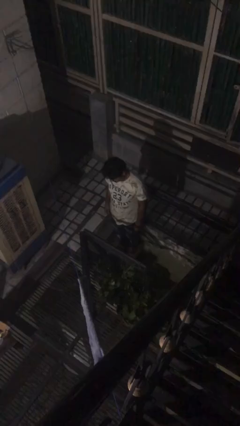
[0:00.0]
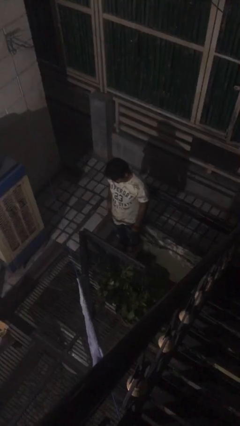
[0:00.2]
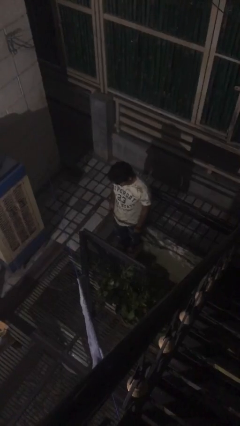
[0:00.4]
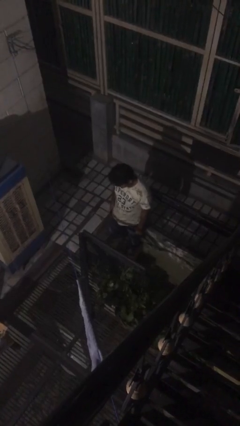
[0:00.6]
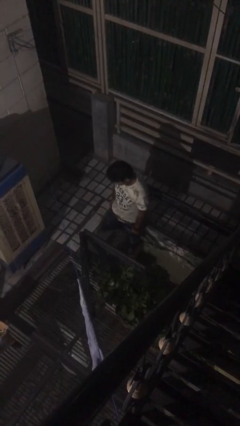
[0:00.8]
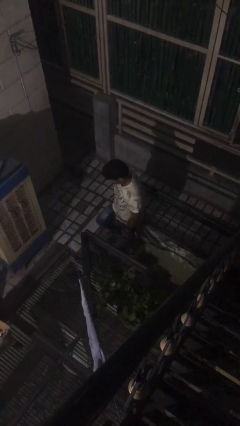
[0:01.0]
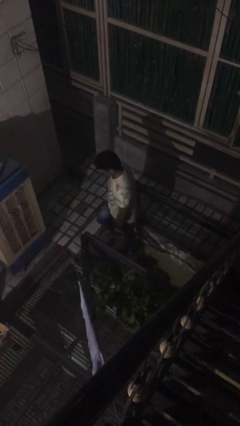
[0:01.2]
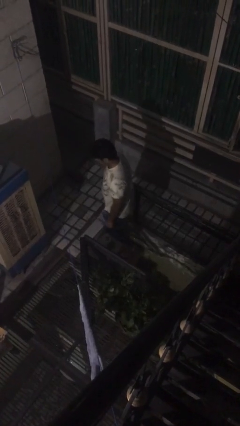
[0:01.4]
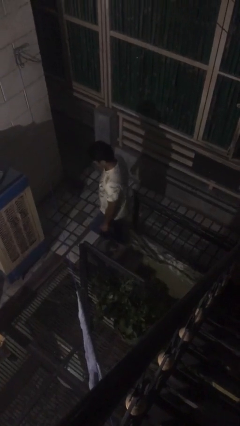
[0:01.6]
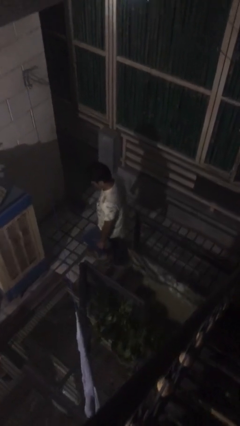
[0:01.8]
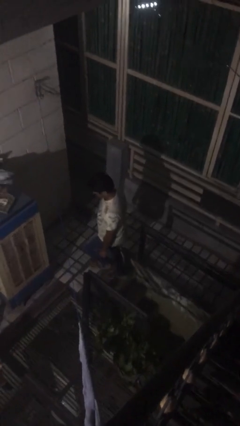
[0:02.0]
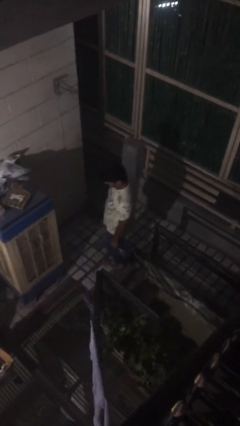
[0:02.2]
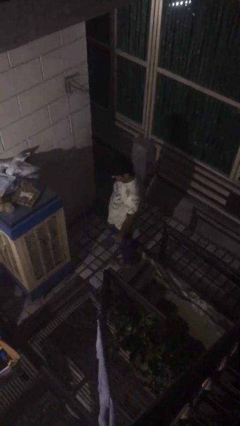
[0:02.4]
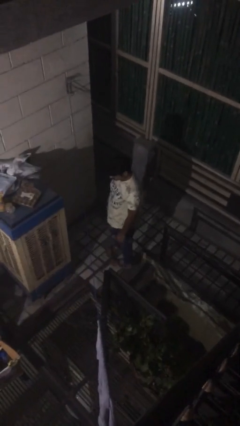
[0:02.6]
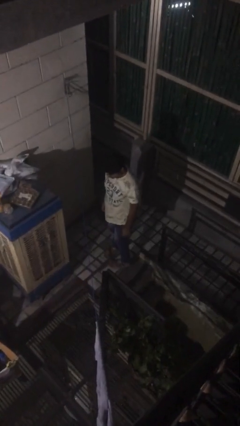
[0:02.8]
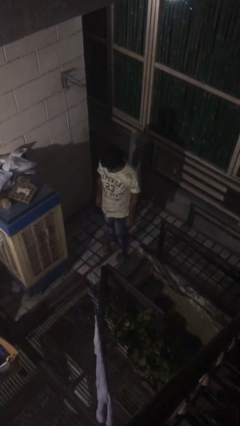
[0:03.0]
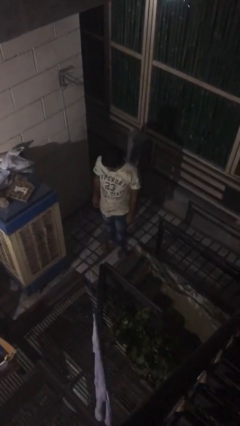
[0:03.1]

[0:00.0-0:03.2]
person climbs up stairs

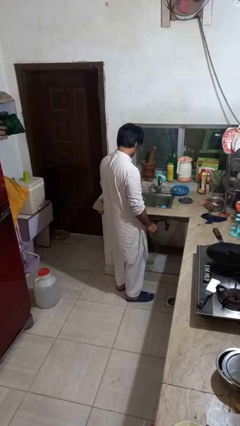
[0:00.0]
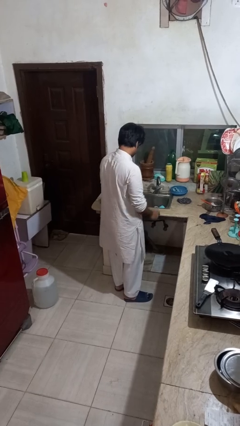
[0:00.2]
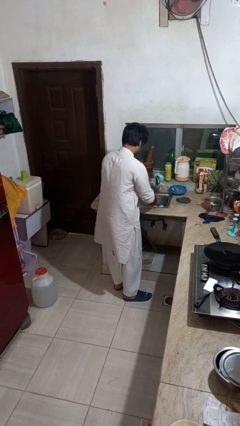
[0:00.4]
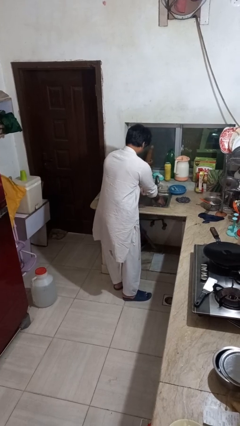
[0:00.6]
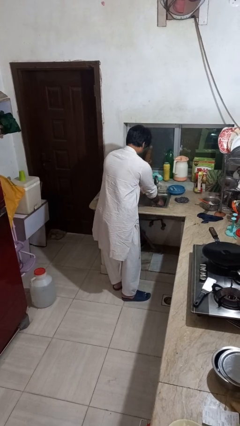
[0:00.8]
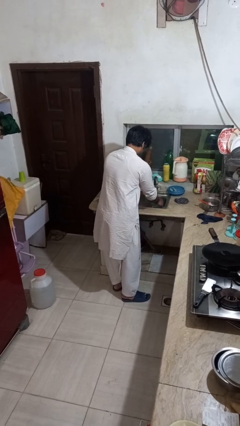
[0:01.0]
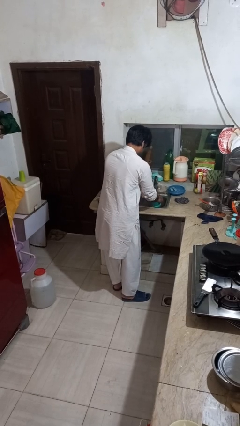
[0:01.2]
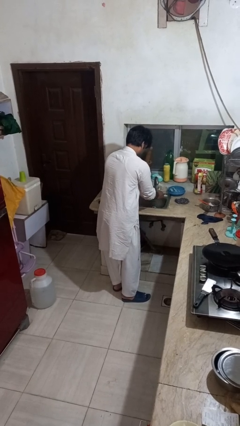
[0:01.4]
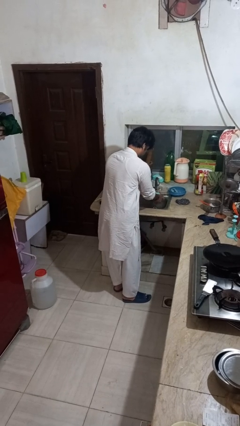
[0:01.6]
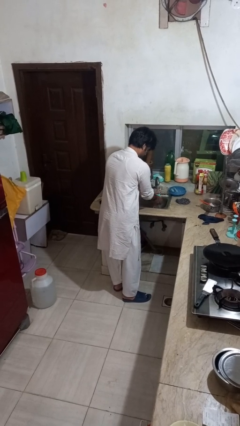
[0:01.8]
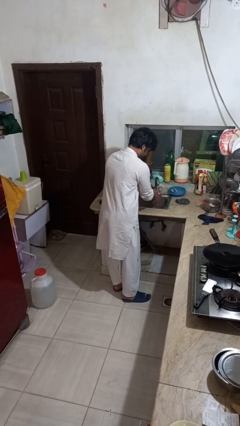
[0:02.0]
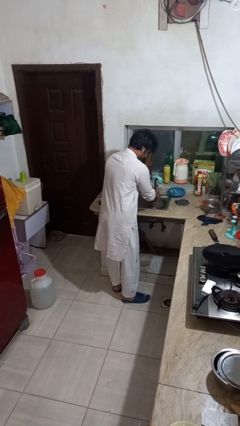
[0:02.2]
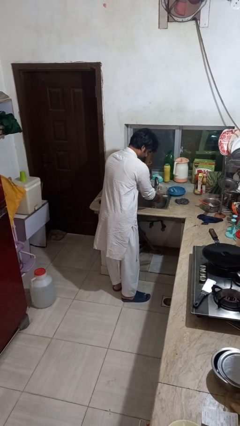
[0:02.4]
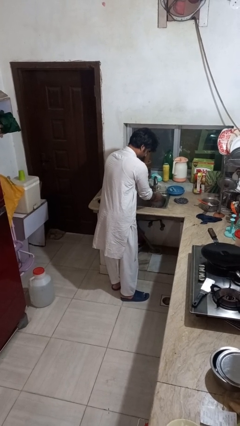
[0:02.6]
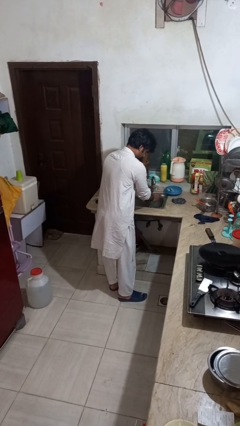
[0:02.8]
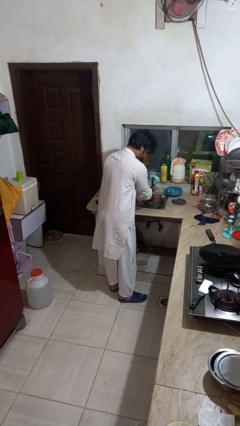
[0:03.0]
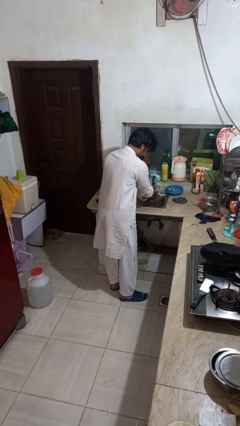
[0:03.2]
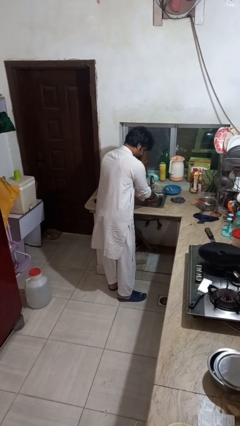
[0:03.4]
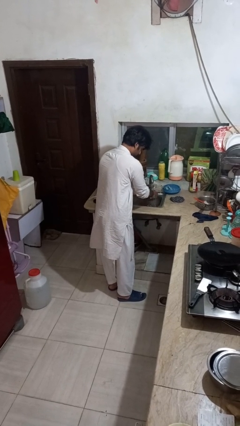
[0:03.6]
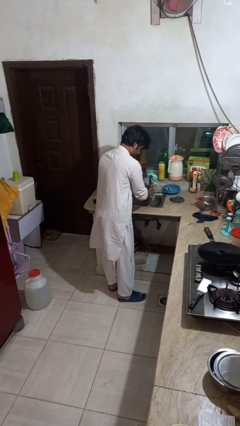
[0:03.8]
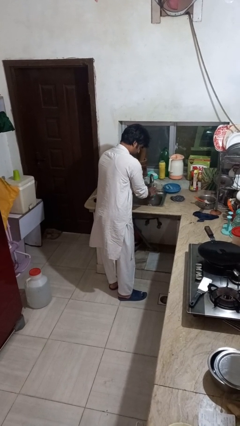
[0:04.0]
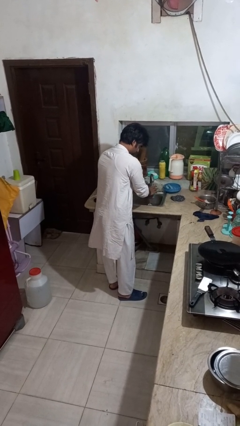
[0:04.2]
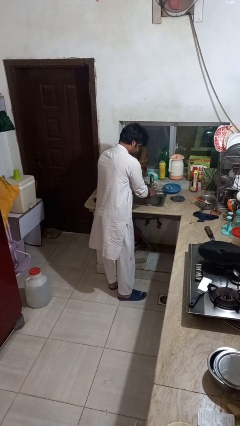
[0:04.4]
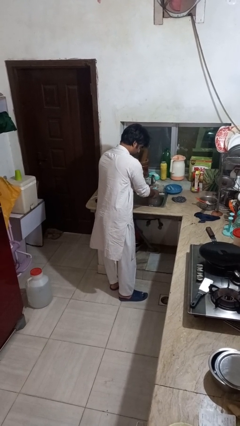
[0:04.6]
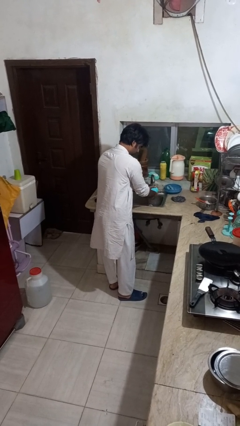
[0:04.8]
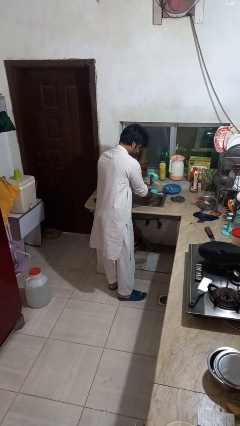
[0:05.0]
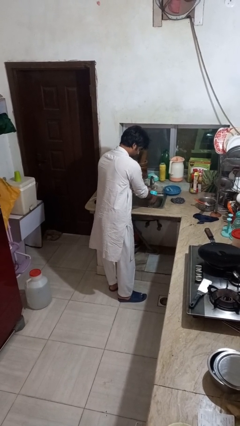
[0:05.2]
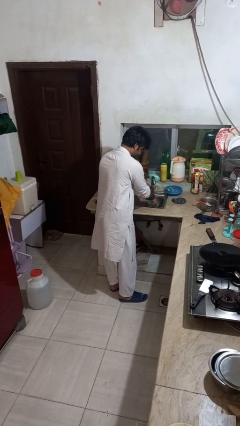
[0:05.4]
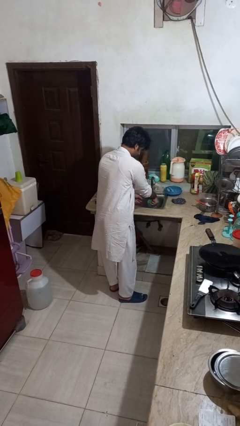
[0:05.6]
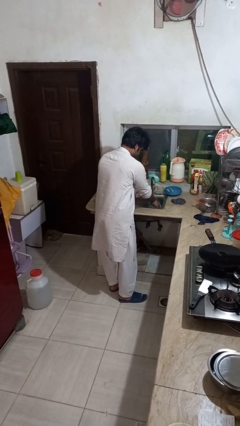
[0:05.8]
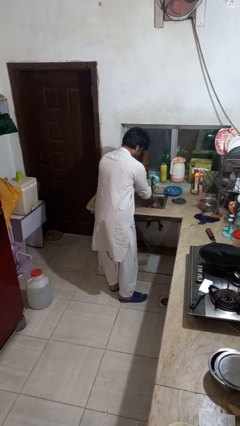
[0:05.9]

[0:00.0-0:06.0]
person washes dish

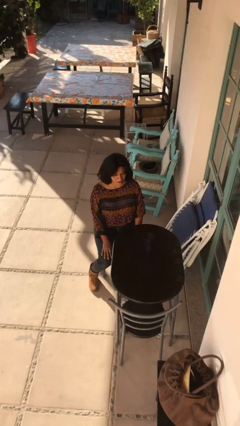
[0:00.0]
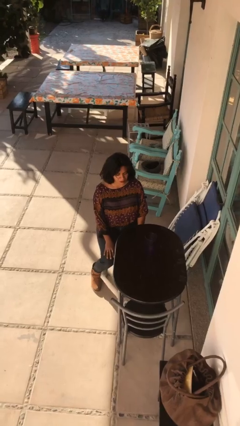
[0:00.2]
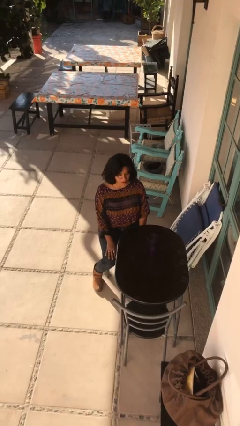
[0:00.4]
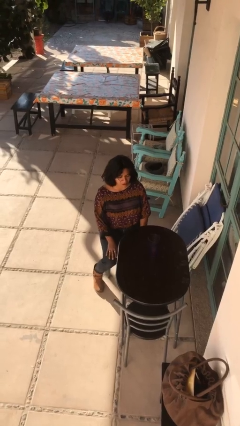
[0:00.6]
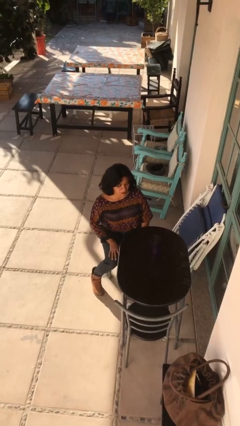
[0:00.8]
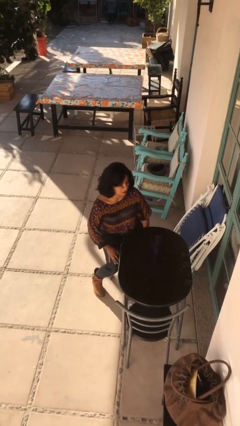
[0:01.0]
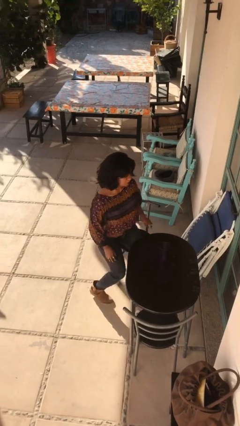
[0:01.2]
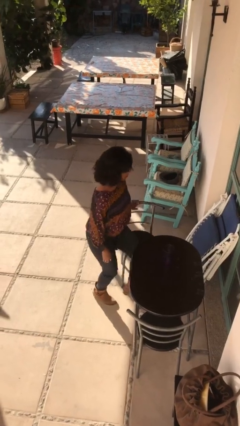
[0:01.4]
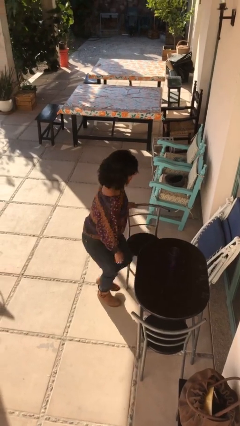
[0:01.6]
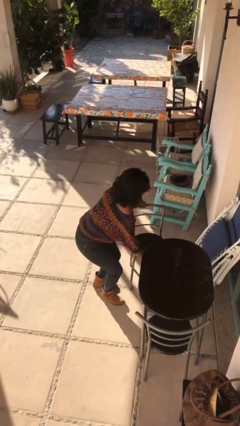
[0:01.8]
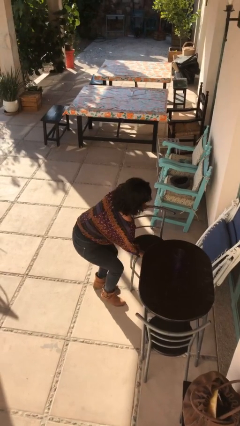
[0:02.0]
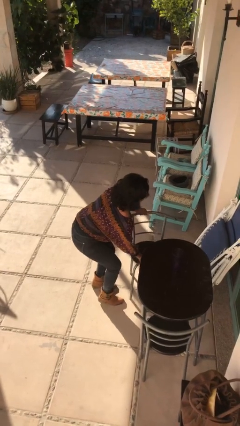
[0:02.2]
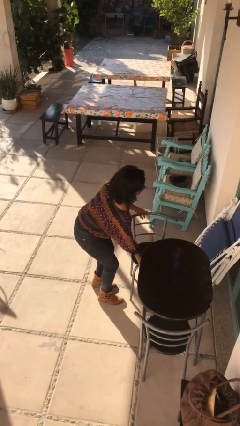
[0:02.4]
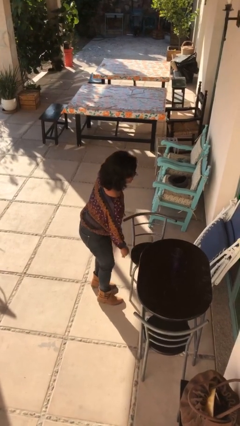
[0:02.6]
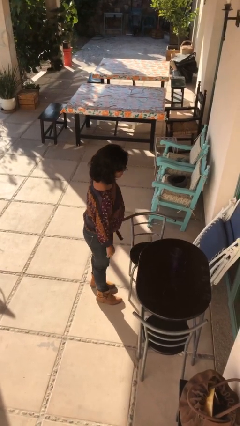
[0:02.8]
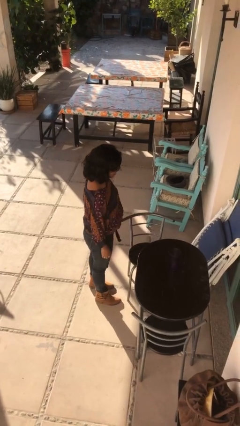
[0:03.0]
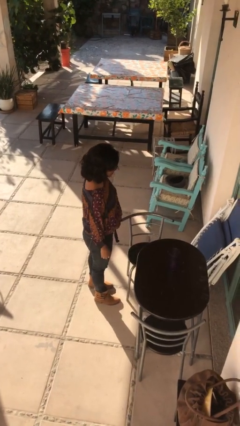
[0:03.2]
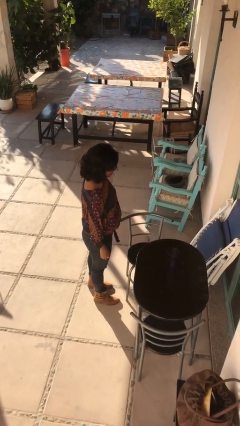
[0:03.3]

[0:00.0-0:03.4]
person stands up

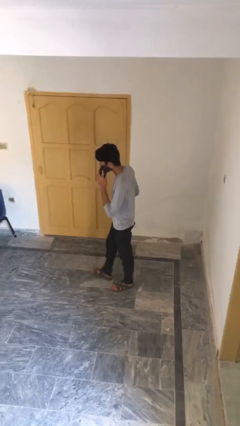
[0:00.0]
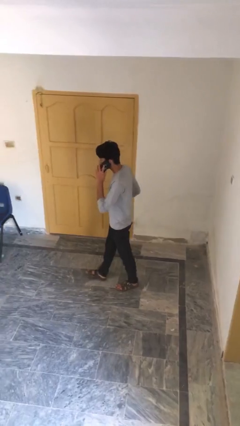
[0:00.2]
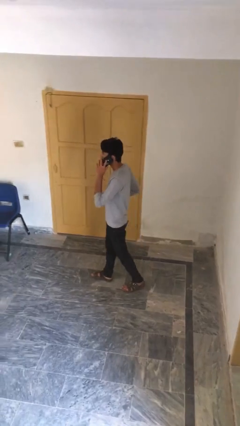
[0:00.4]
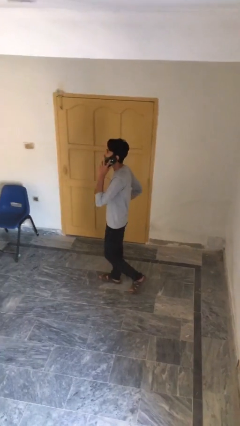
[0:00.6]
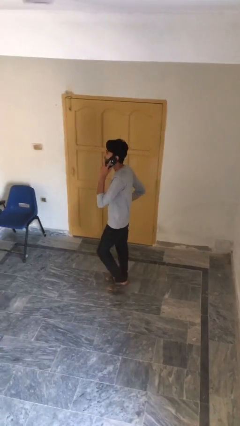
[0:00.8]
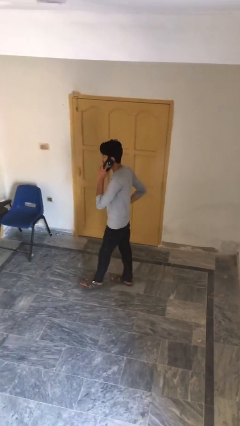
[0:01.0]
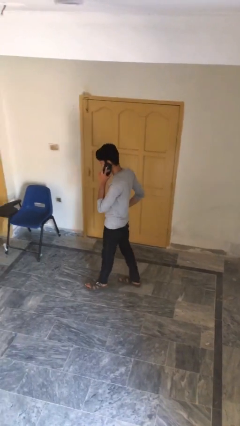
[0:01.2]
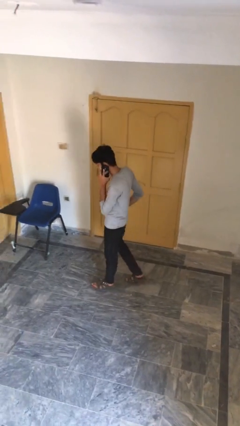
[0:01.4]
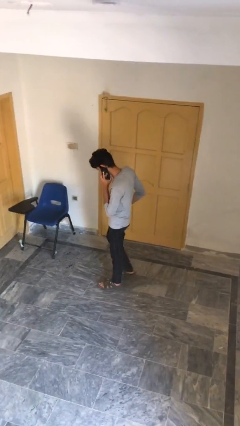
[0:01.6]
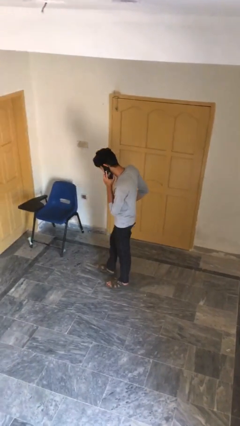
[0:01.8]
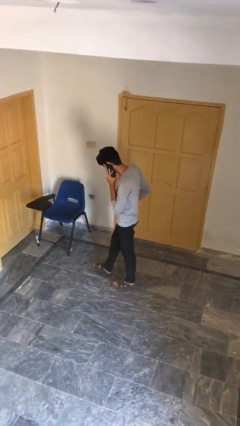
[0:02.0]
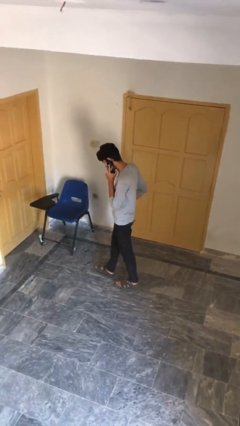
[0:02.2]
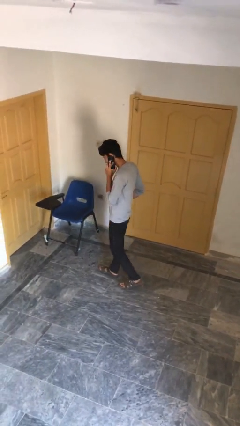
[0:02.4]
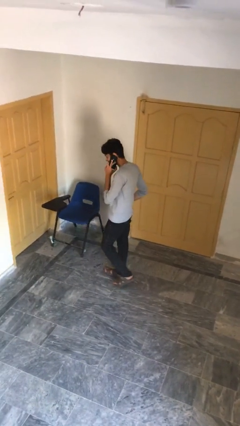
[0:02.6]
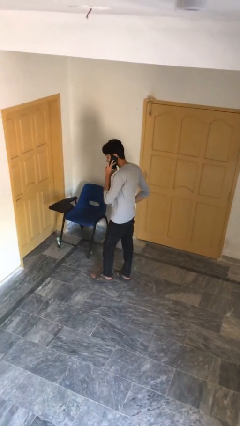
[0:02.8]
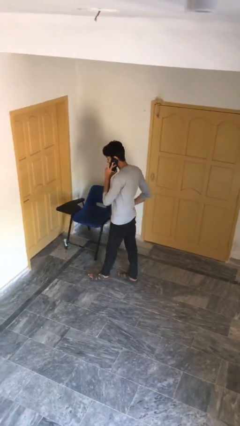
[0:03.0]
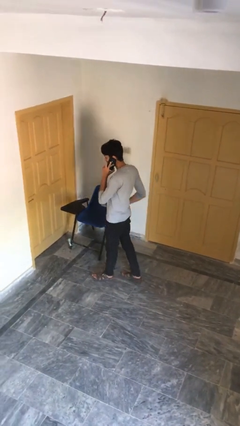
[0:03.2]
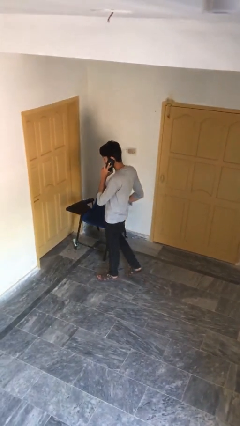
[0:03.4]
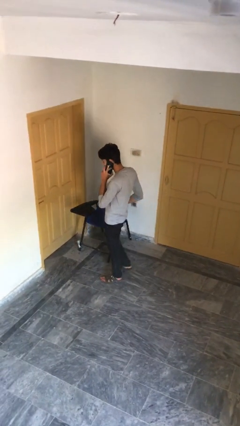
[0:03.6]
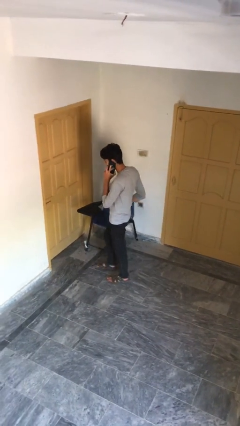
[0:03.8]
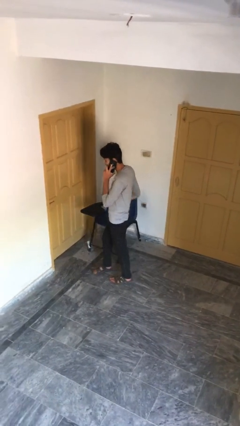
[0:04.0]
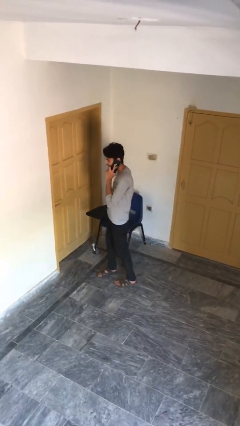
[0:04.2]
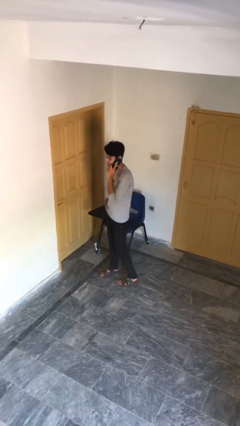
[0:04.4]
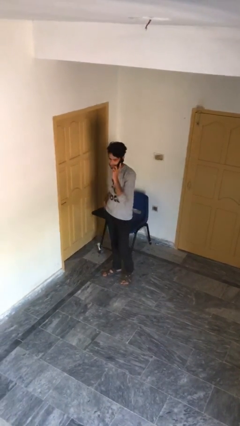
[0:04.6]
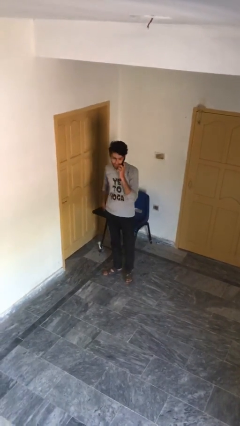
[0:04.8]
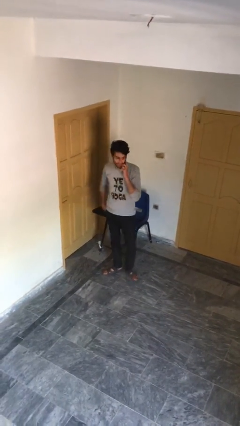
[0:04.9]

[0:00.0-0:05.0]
person talks on phone
